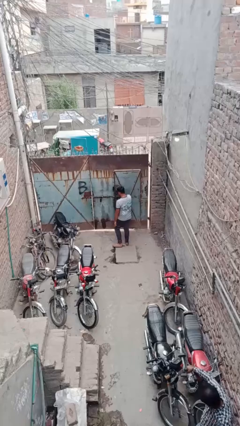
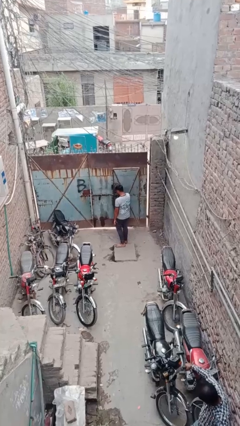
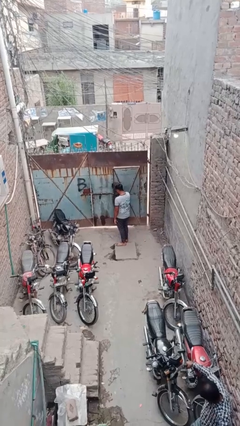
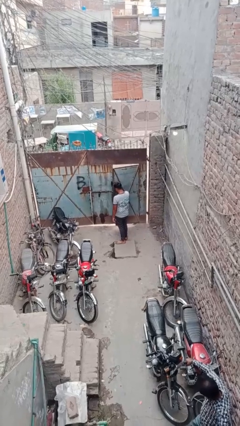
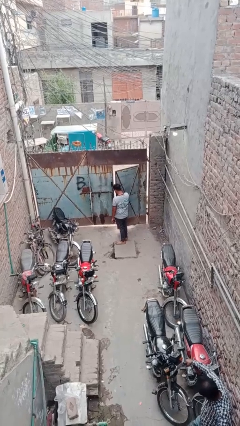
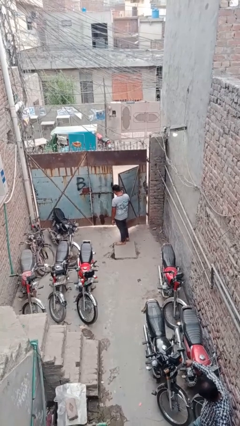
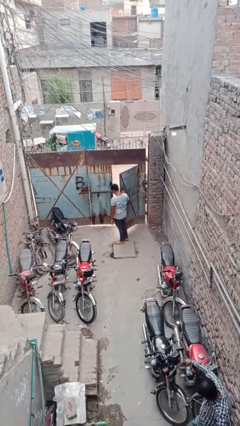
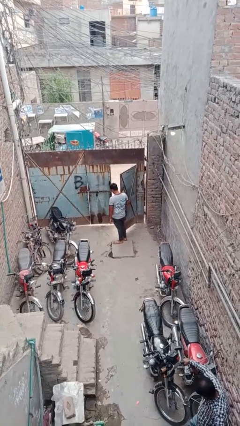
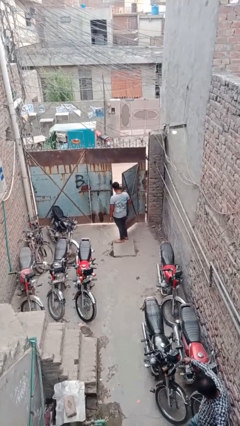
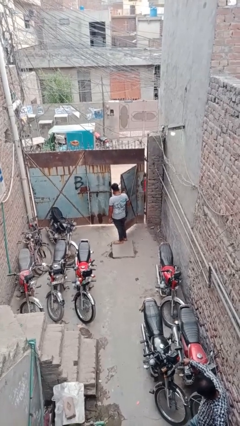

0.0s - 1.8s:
person opens facility door

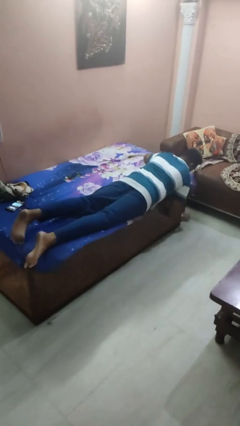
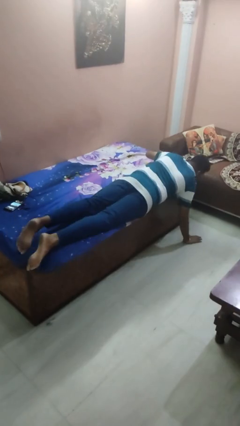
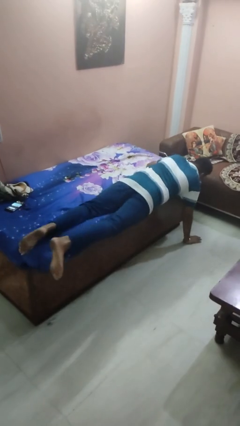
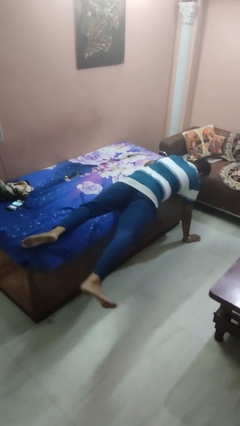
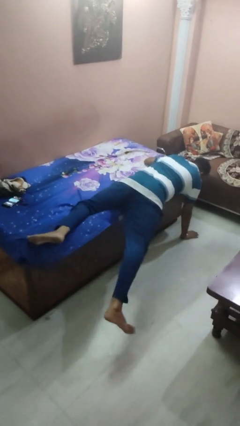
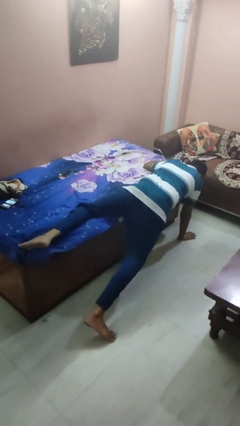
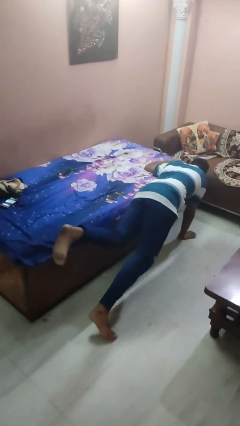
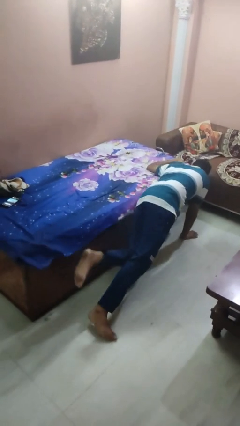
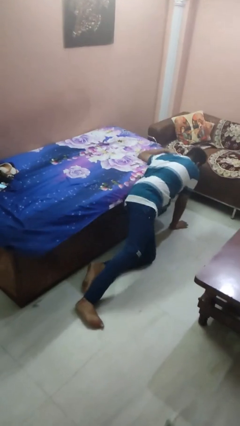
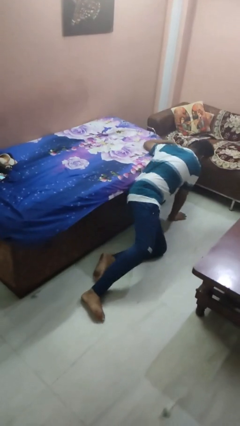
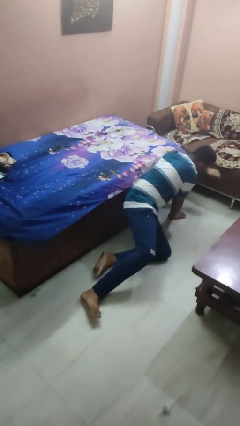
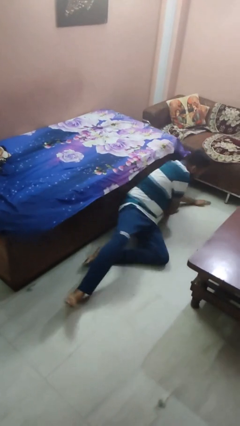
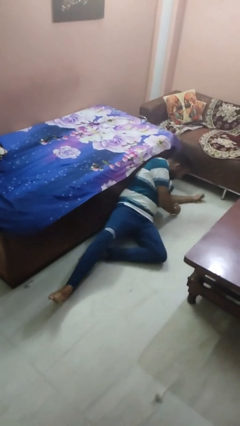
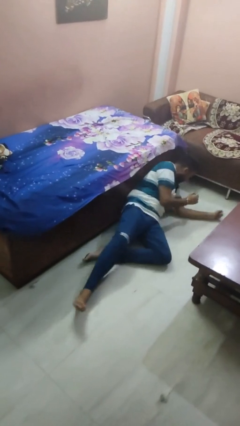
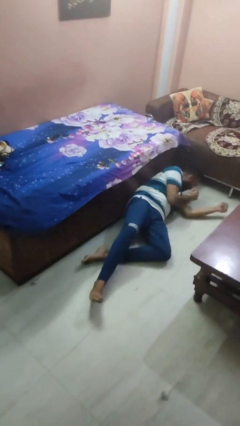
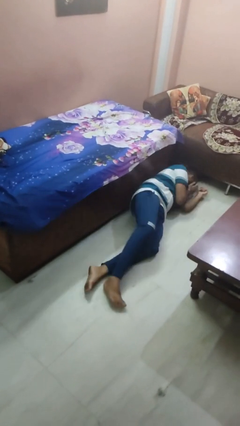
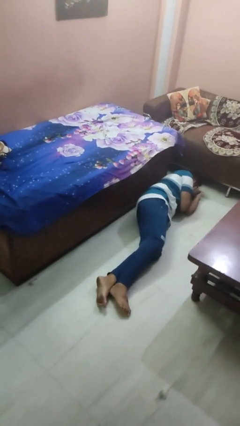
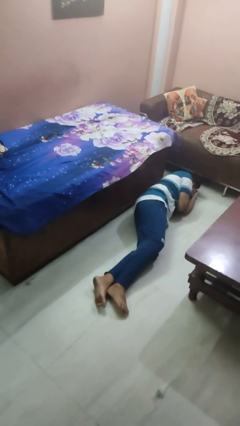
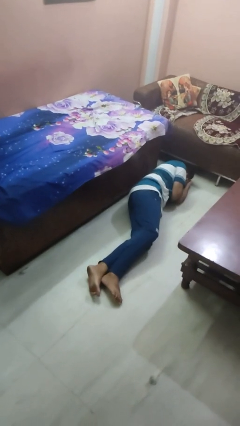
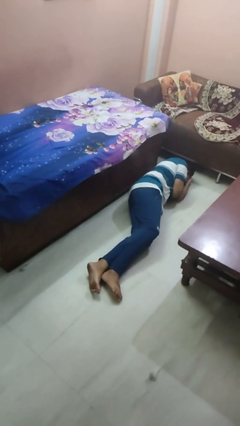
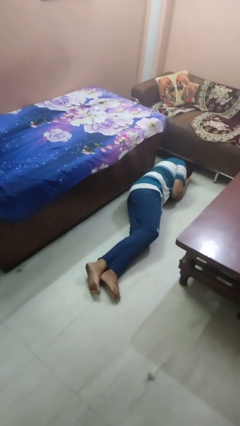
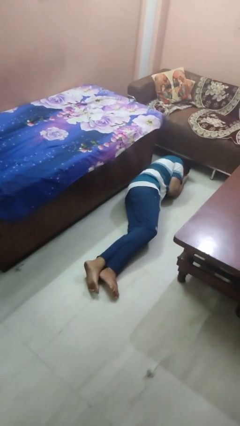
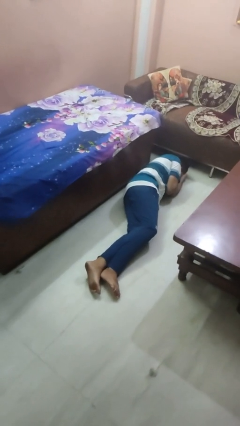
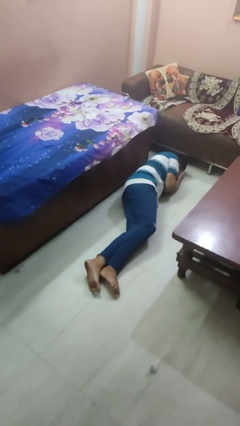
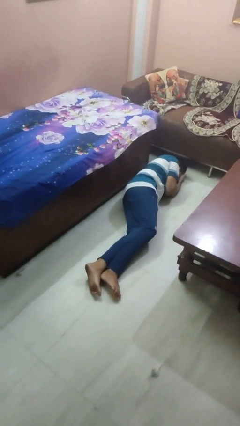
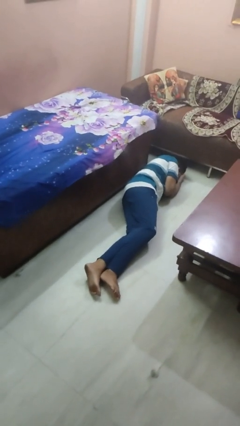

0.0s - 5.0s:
person falls from bed

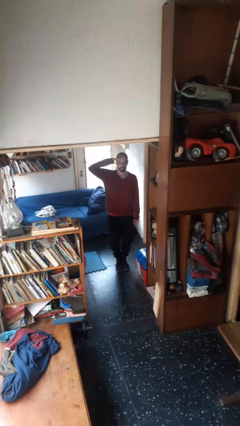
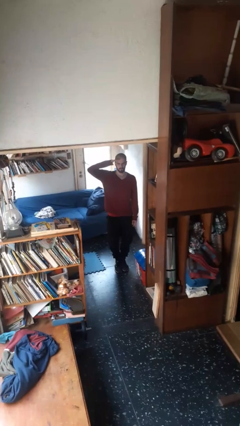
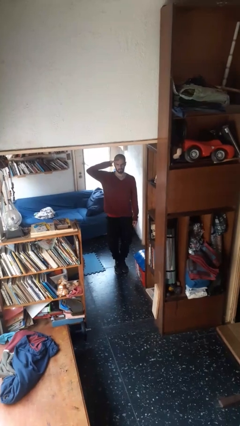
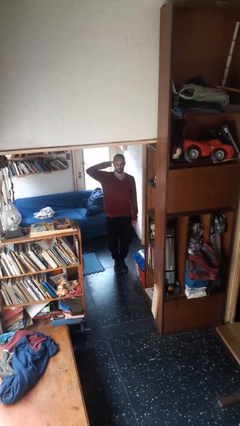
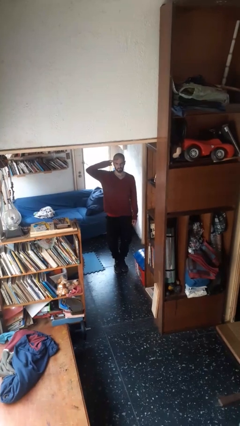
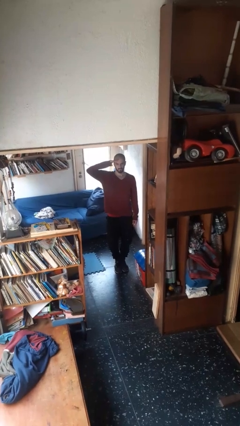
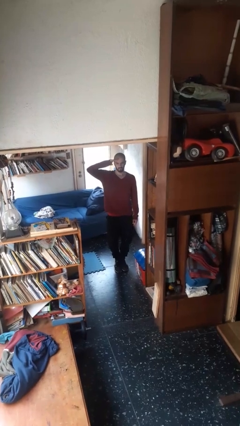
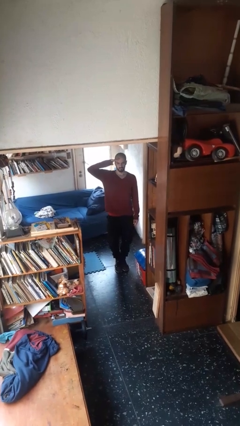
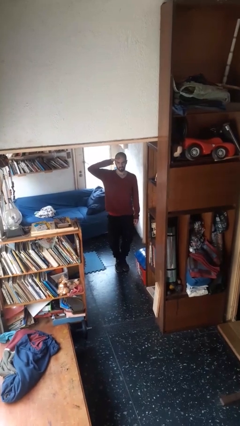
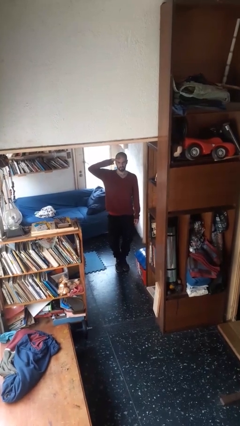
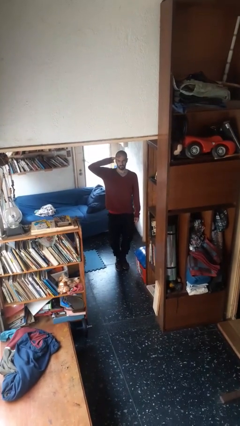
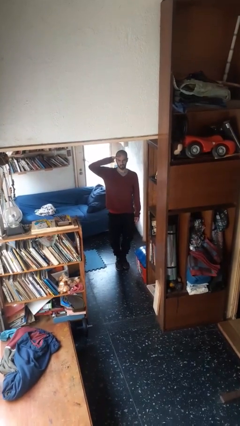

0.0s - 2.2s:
person salutes

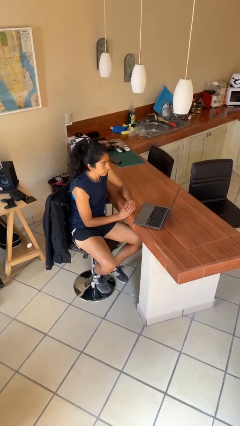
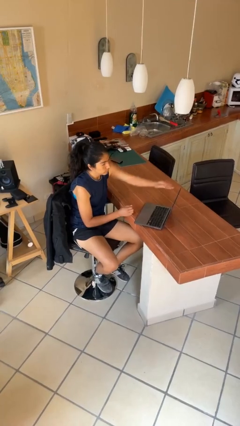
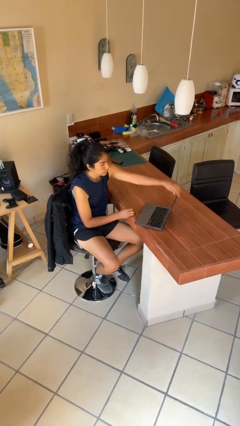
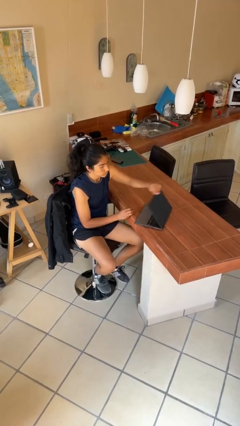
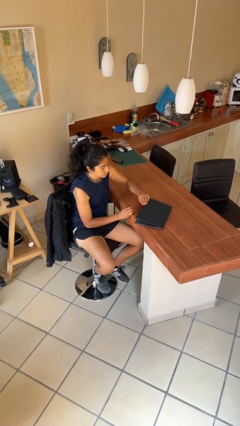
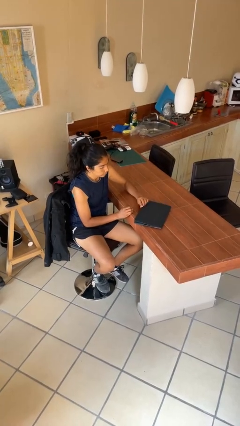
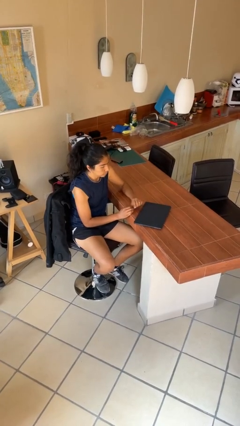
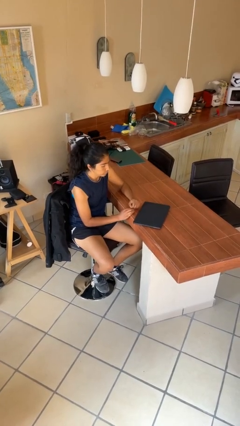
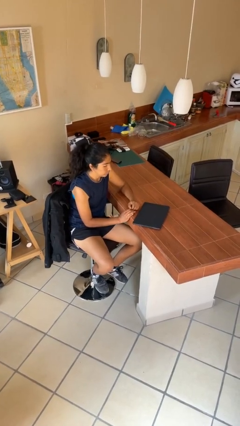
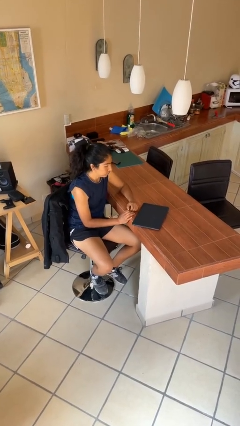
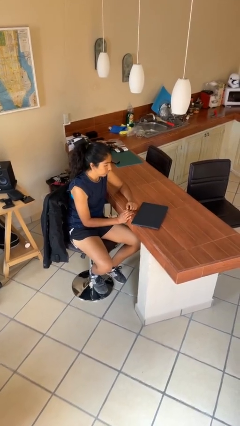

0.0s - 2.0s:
person closes laptop

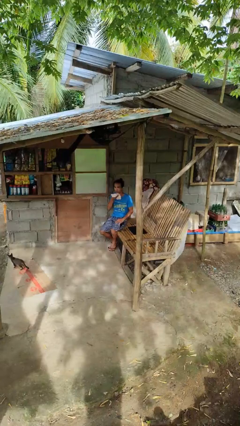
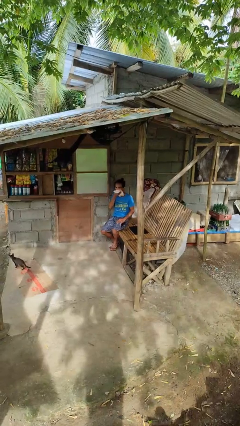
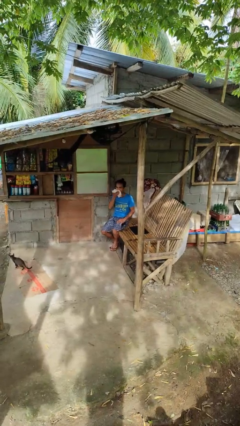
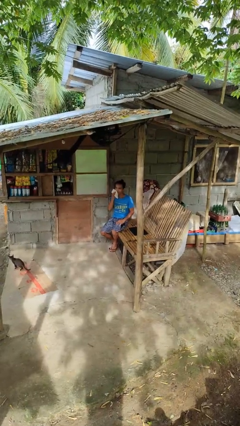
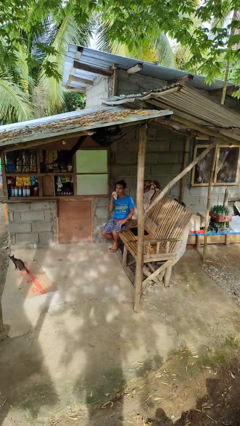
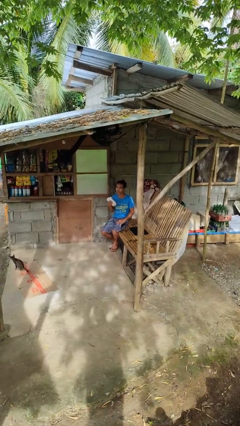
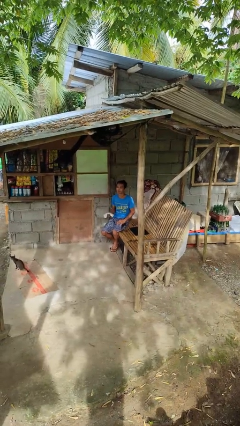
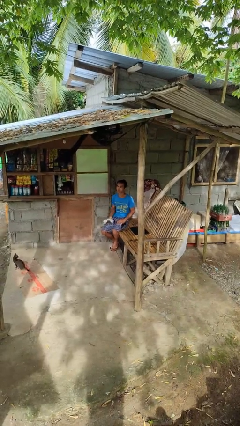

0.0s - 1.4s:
person wipes mouth with napkin

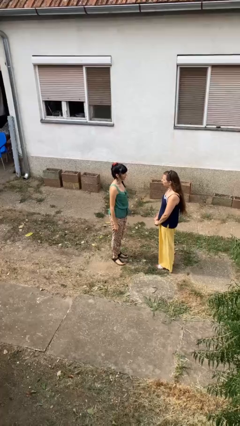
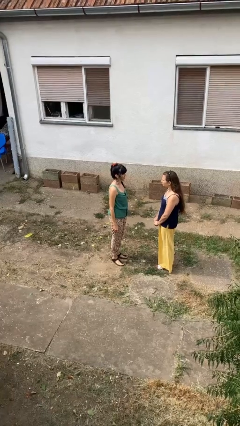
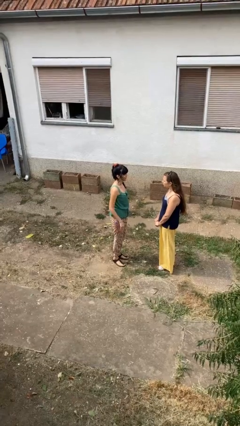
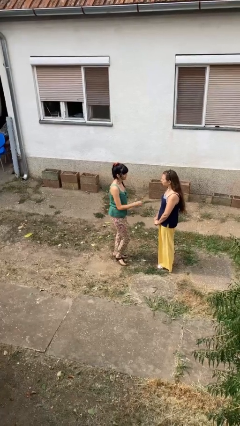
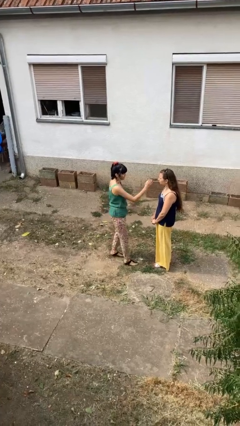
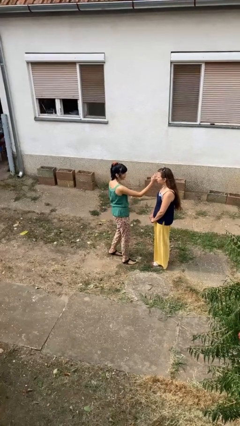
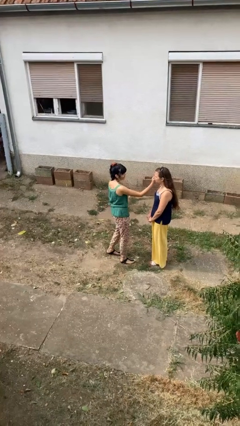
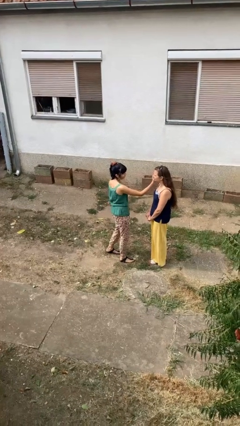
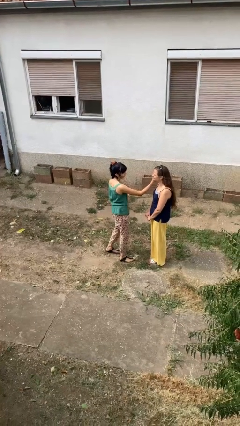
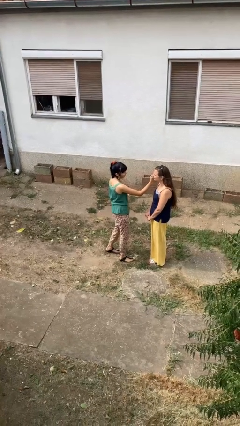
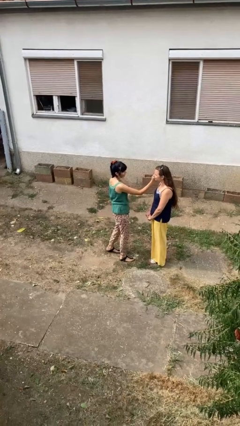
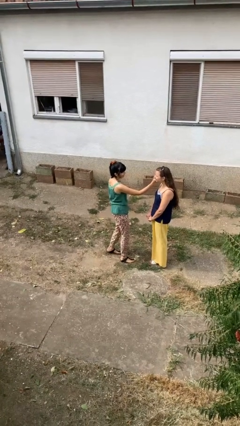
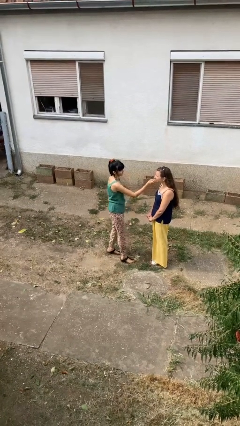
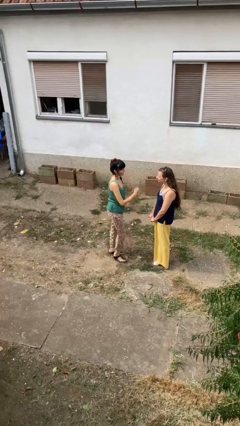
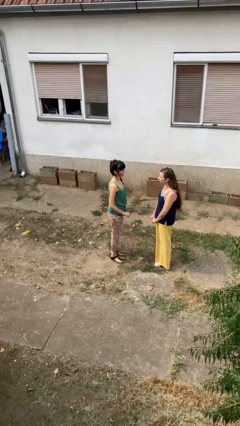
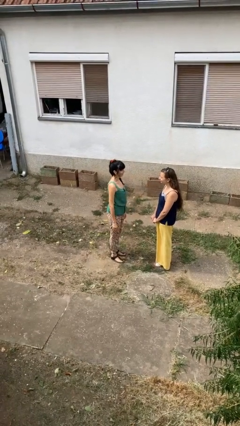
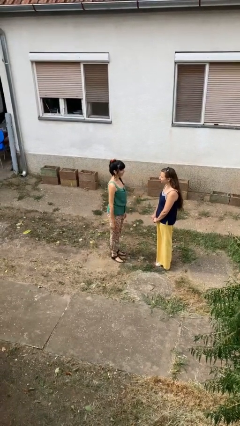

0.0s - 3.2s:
person touches face of person

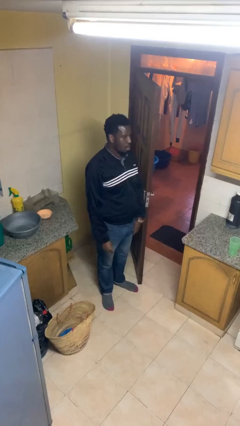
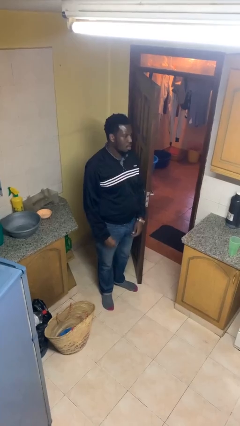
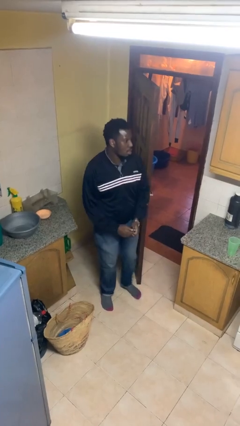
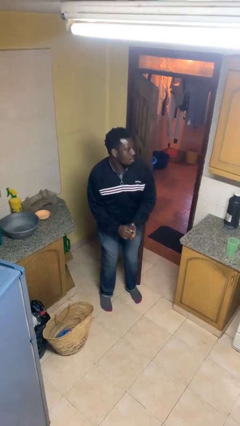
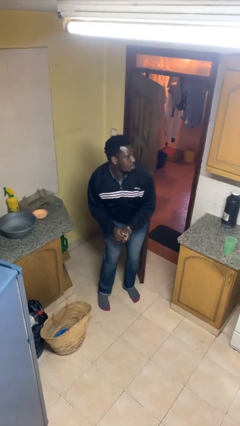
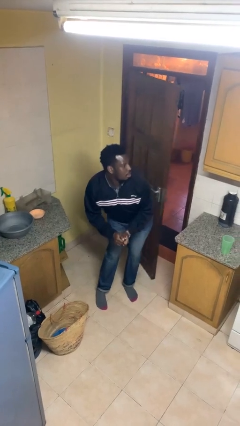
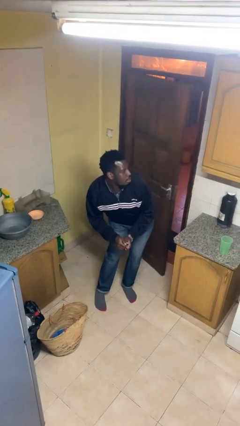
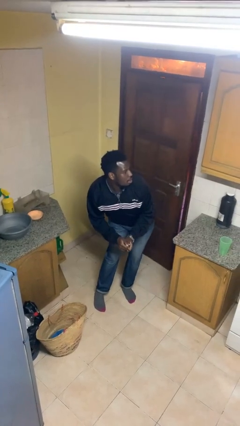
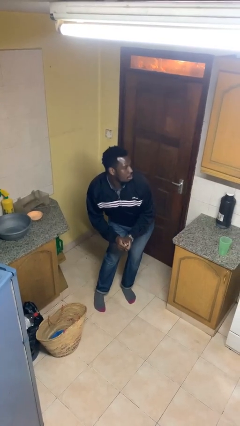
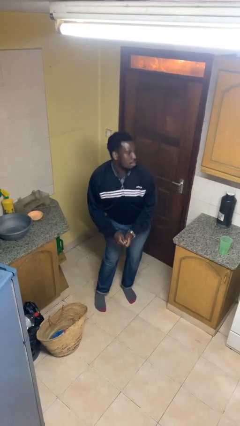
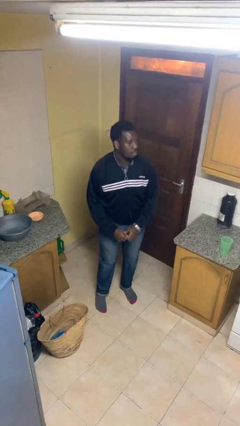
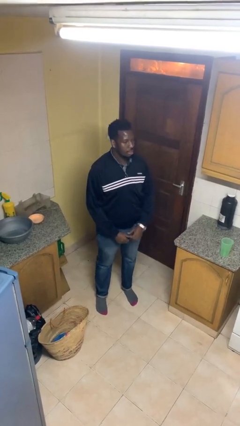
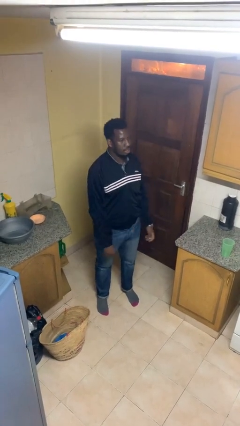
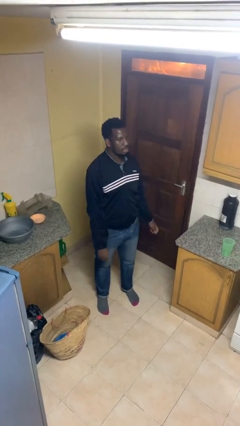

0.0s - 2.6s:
person closes door with hip
